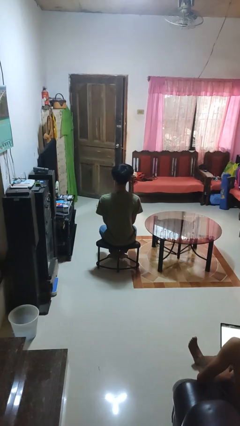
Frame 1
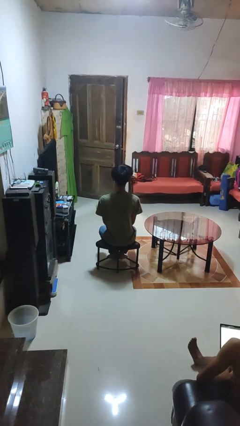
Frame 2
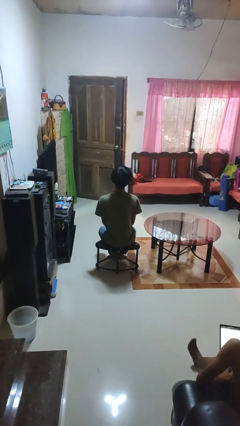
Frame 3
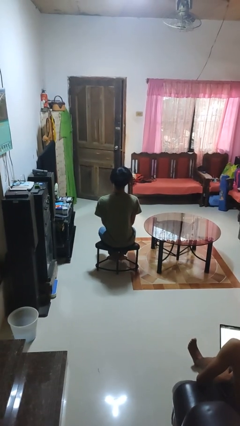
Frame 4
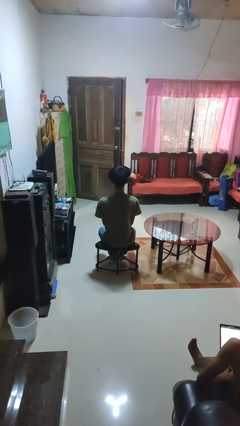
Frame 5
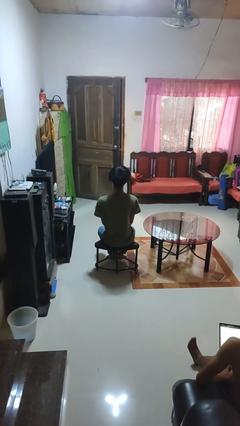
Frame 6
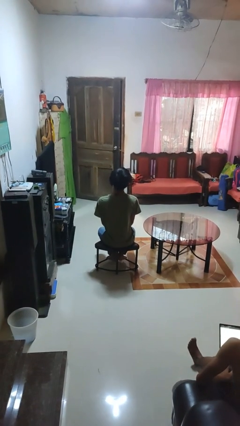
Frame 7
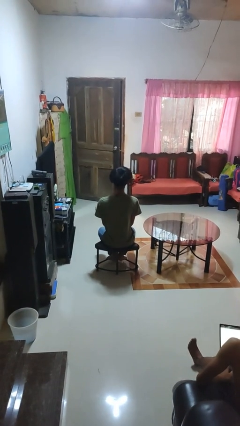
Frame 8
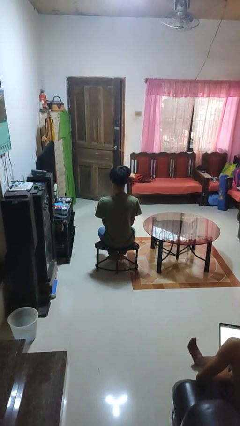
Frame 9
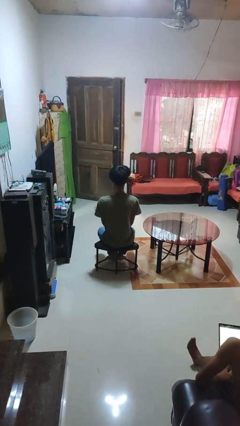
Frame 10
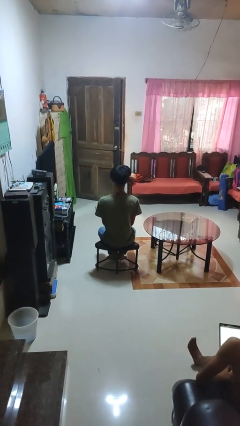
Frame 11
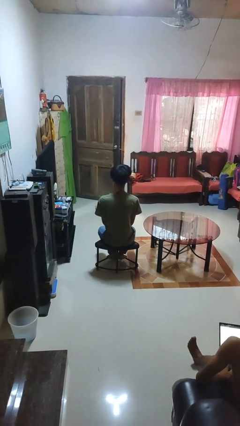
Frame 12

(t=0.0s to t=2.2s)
person nods head

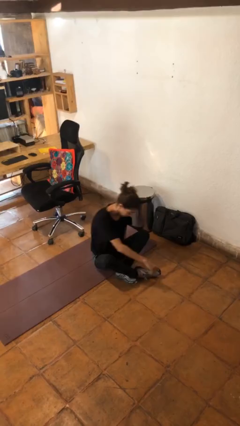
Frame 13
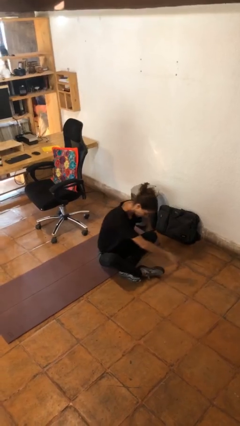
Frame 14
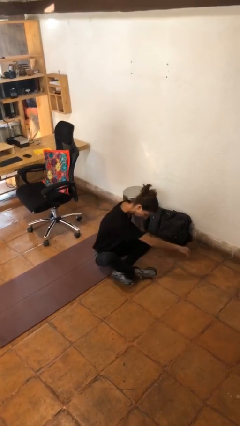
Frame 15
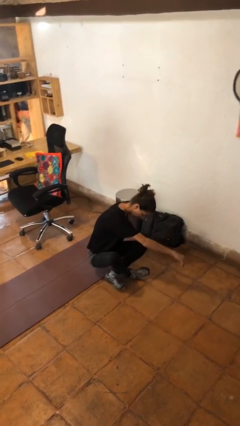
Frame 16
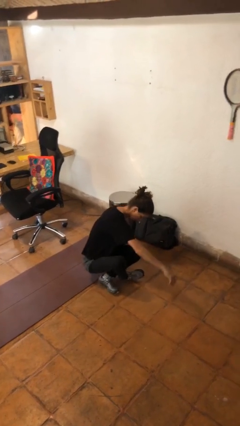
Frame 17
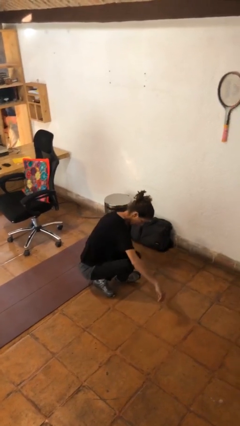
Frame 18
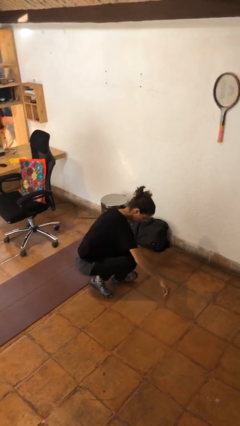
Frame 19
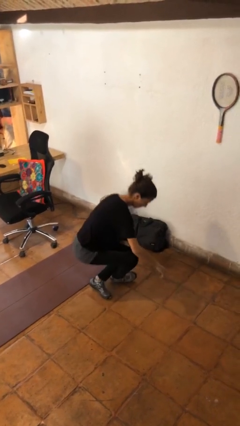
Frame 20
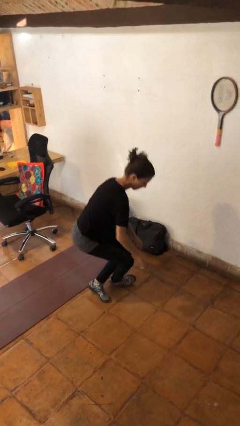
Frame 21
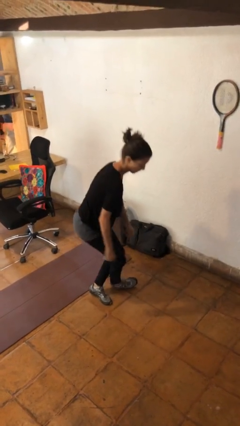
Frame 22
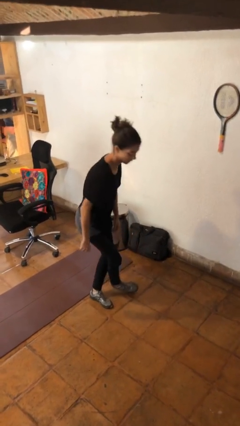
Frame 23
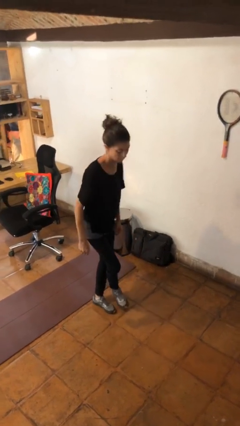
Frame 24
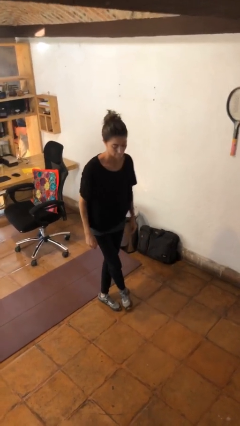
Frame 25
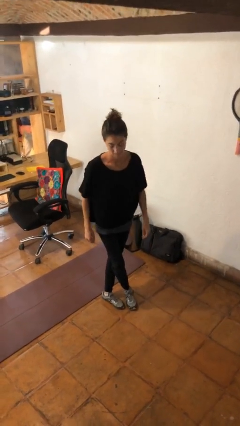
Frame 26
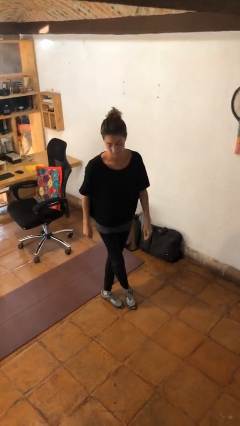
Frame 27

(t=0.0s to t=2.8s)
person stands up from floor

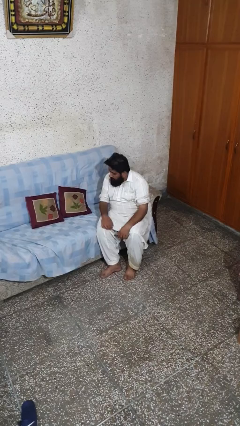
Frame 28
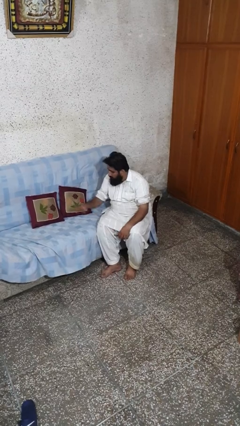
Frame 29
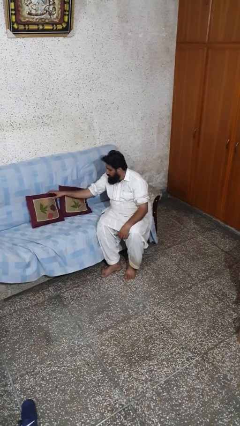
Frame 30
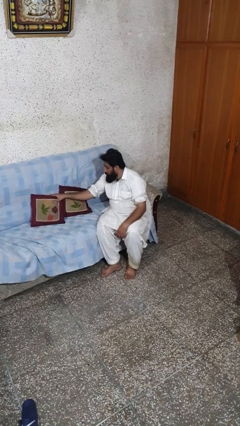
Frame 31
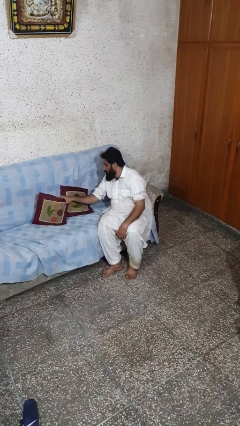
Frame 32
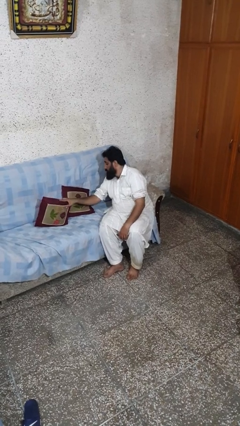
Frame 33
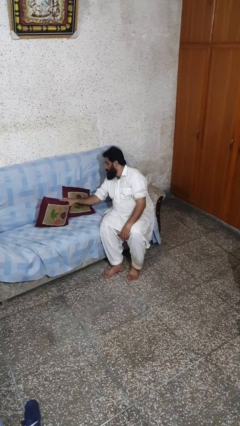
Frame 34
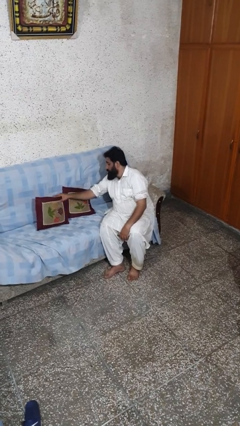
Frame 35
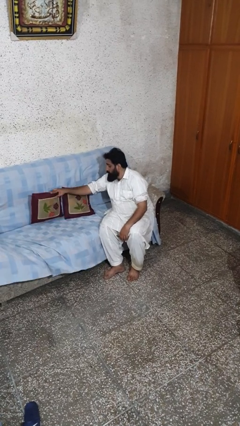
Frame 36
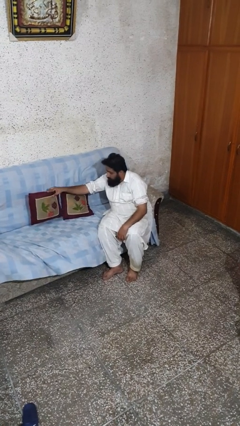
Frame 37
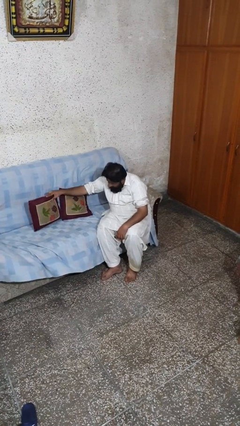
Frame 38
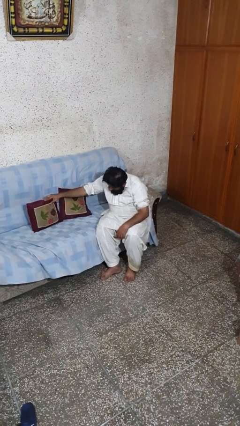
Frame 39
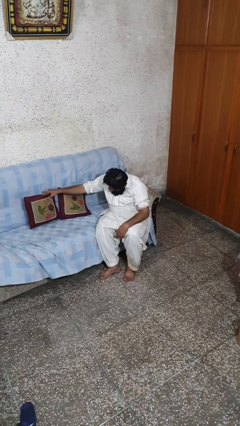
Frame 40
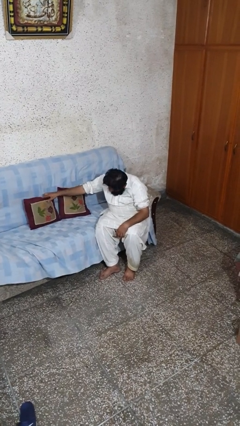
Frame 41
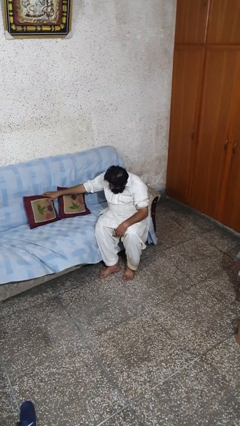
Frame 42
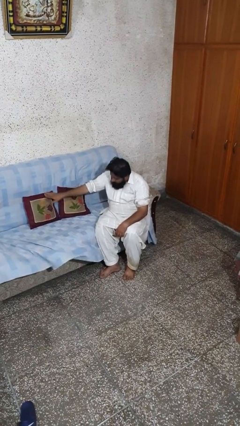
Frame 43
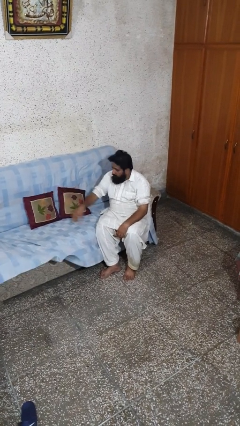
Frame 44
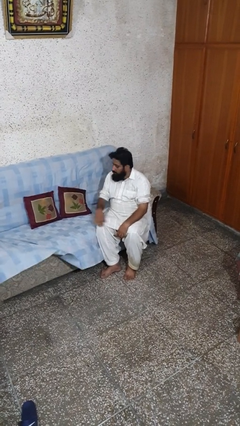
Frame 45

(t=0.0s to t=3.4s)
person searches in couch

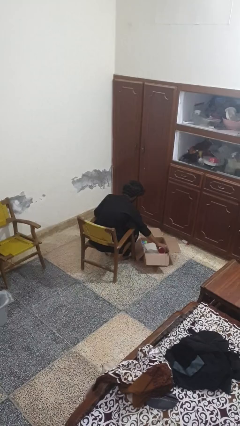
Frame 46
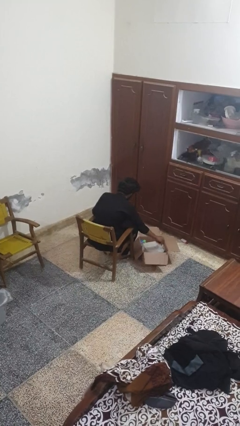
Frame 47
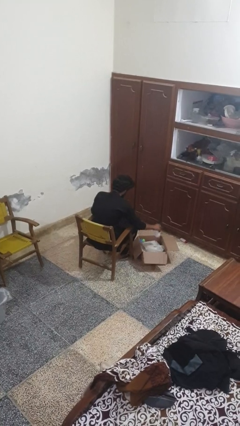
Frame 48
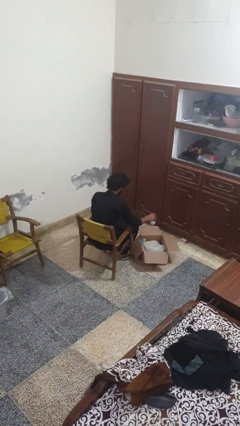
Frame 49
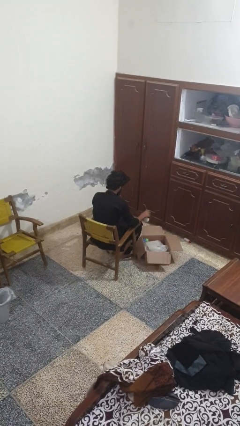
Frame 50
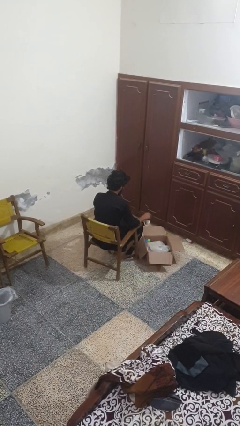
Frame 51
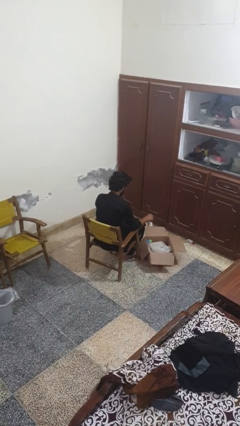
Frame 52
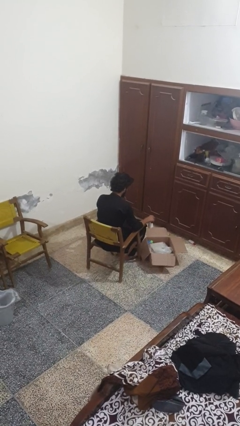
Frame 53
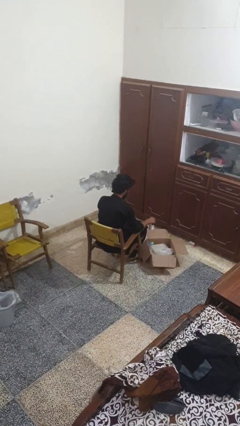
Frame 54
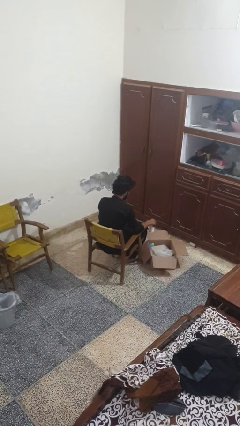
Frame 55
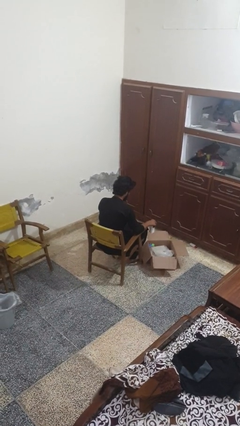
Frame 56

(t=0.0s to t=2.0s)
person takes object from box

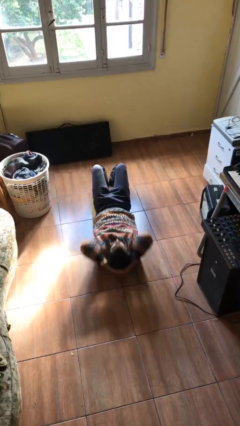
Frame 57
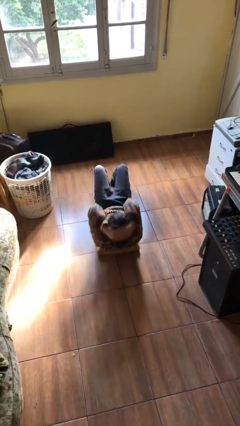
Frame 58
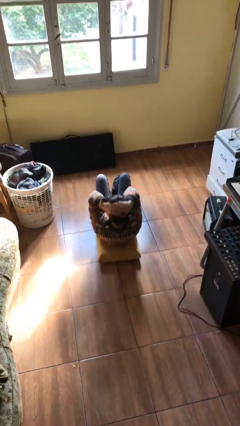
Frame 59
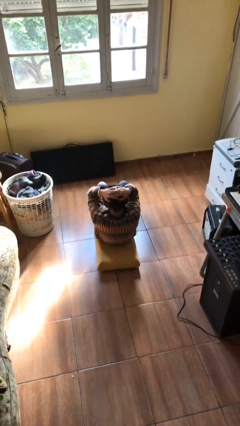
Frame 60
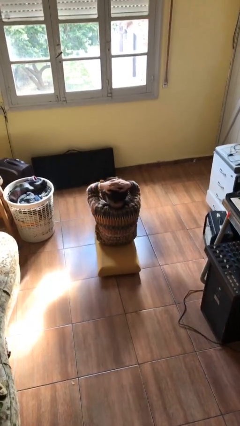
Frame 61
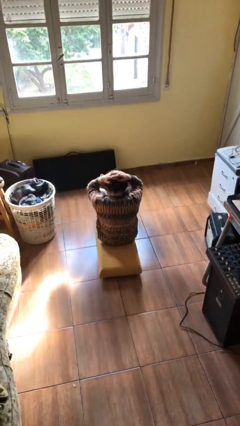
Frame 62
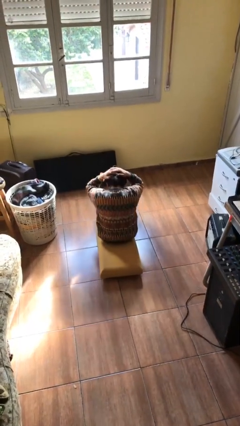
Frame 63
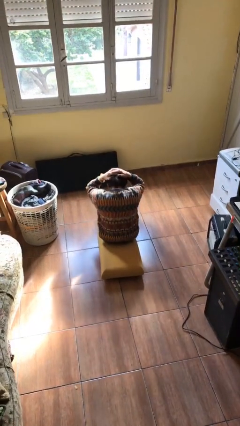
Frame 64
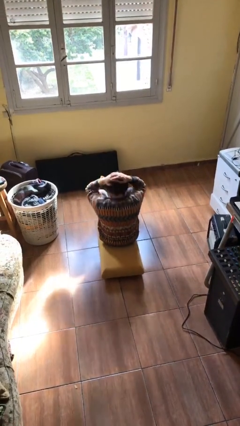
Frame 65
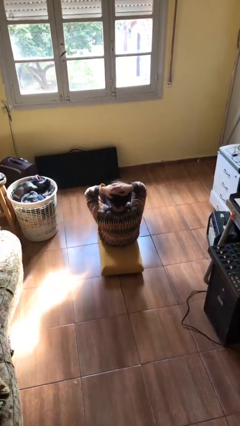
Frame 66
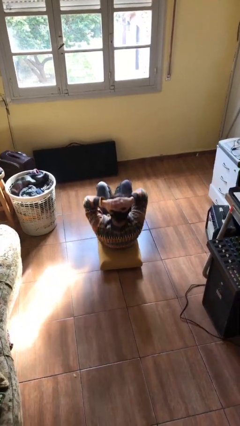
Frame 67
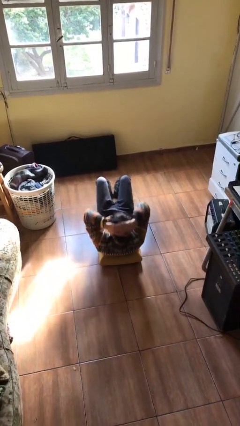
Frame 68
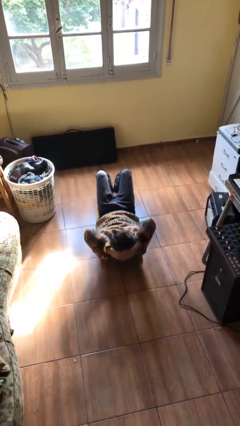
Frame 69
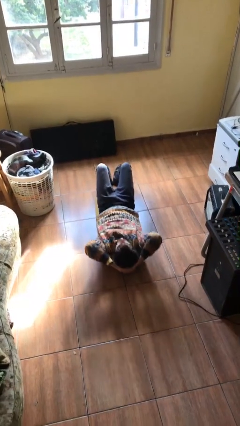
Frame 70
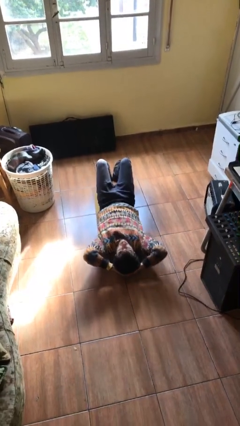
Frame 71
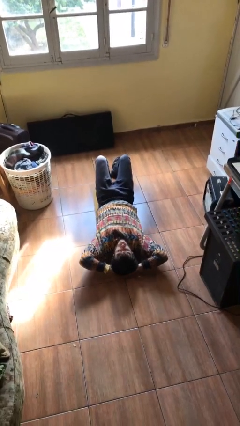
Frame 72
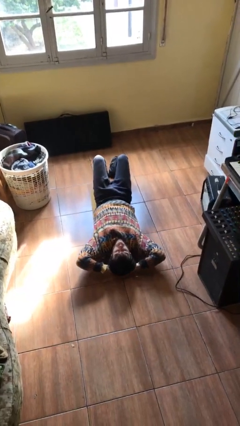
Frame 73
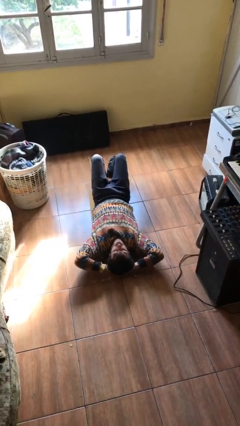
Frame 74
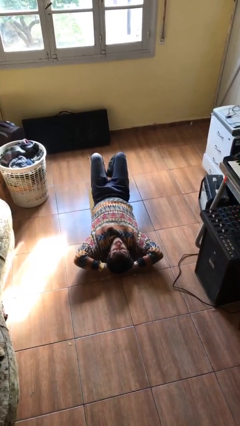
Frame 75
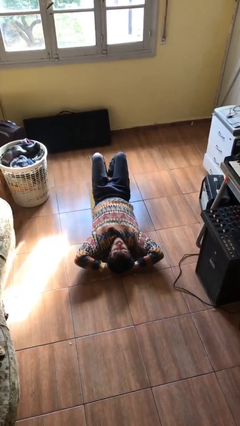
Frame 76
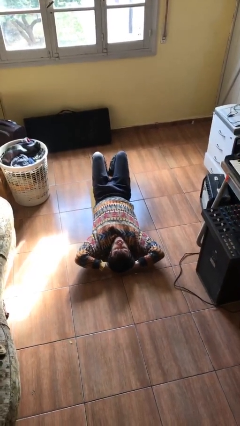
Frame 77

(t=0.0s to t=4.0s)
person exercises with situp

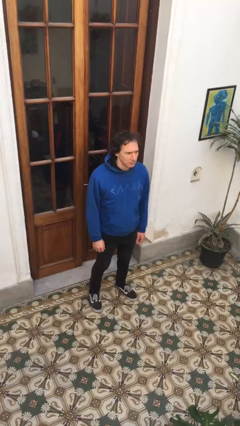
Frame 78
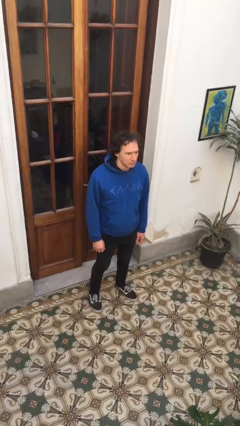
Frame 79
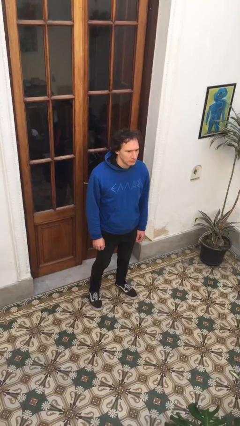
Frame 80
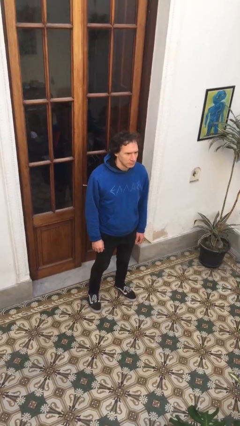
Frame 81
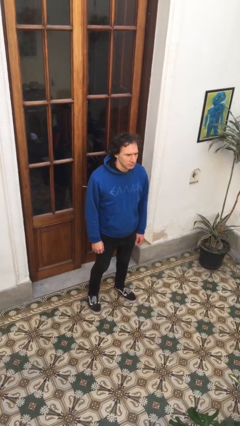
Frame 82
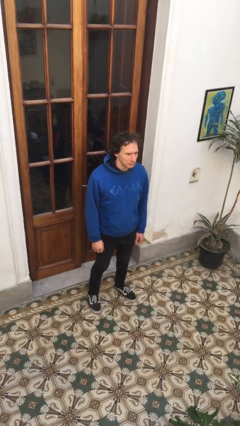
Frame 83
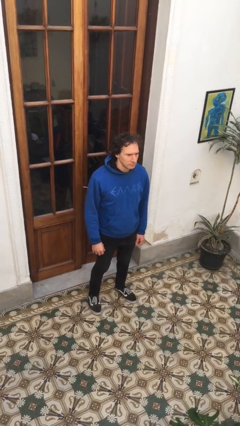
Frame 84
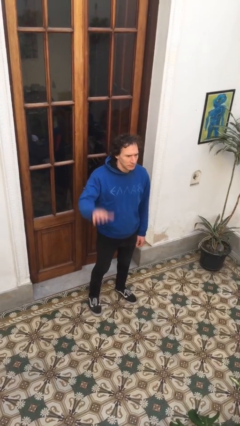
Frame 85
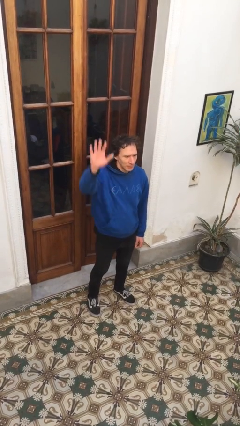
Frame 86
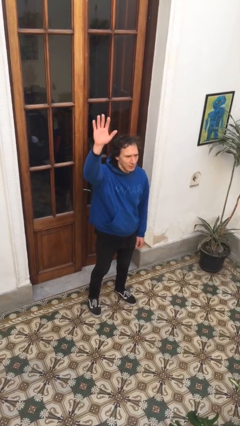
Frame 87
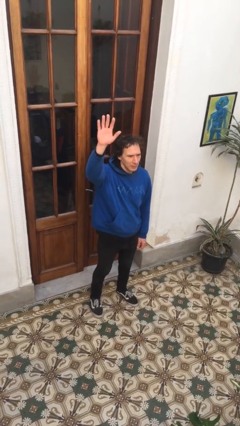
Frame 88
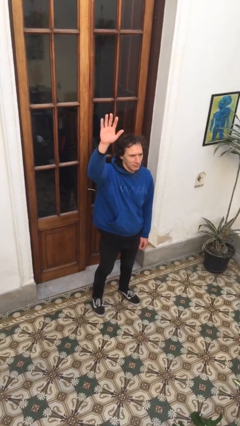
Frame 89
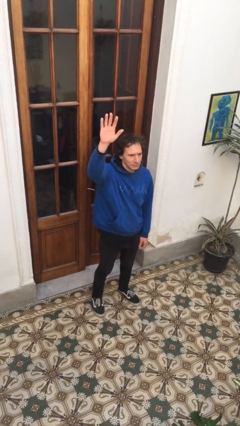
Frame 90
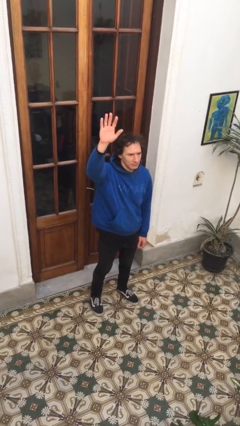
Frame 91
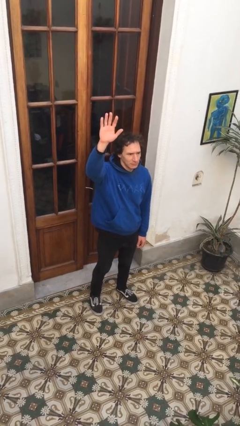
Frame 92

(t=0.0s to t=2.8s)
person gestures raise hand
